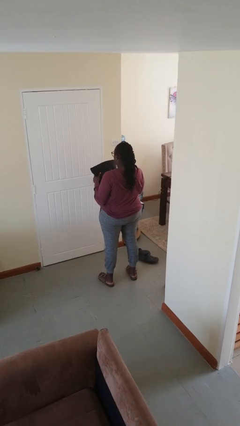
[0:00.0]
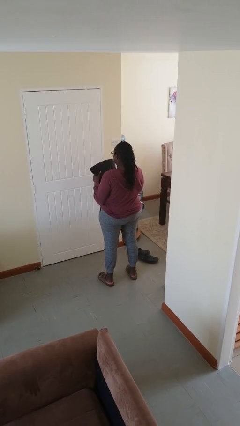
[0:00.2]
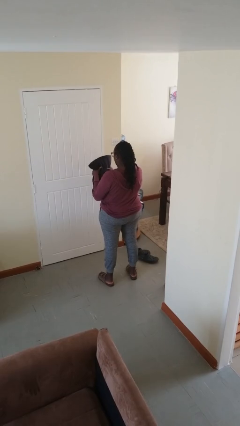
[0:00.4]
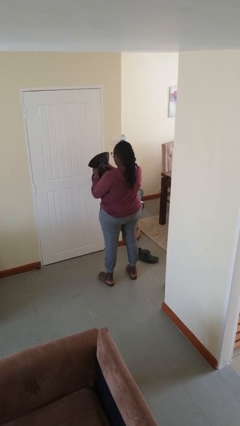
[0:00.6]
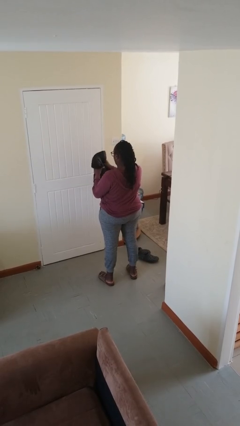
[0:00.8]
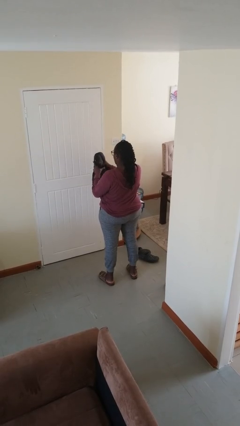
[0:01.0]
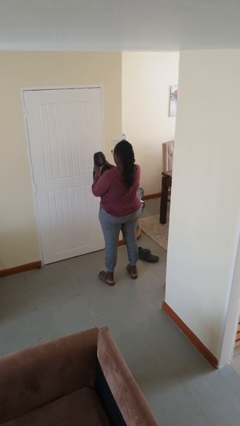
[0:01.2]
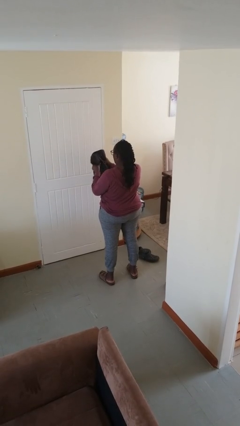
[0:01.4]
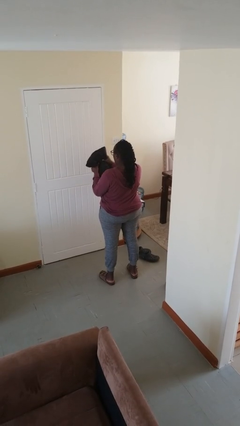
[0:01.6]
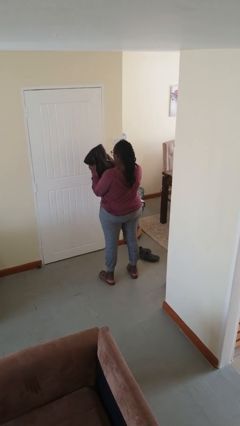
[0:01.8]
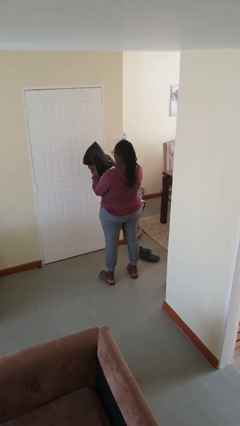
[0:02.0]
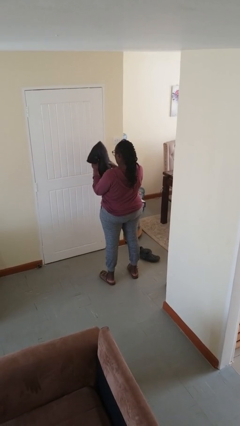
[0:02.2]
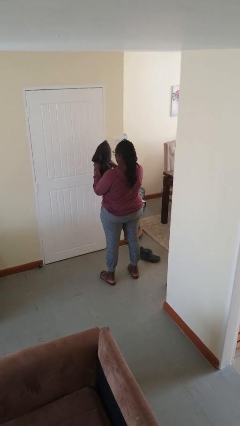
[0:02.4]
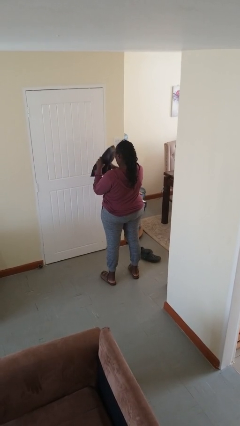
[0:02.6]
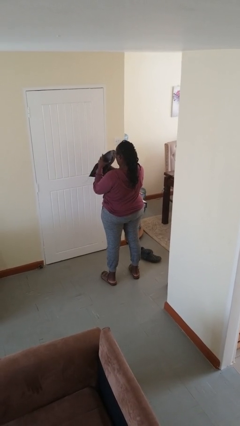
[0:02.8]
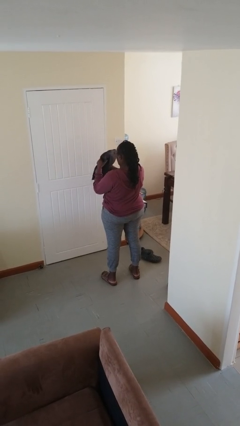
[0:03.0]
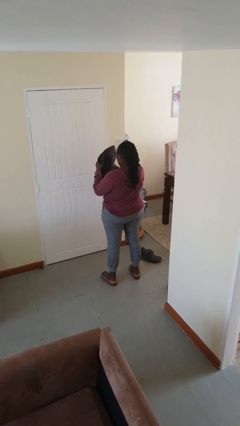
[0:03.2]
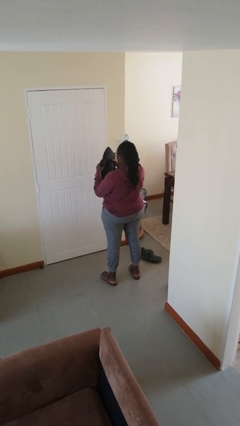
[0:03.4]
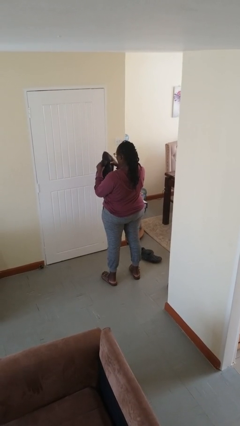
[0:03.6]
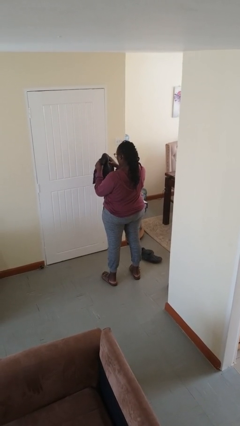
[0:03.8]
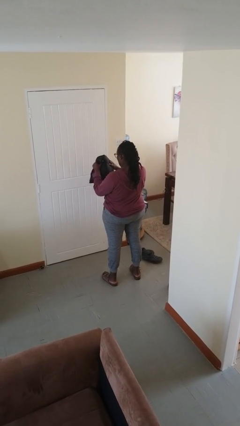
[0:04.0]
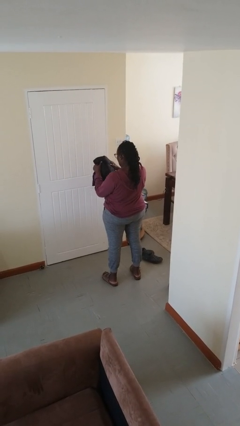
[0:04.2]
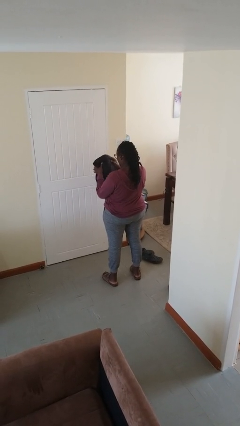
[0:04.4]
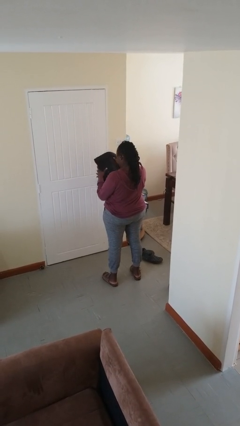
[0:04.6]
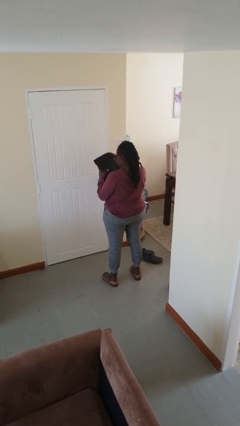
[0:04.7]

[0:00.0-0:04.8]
person squeezes object

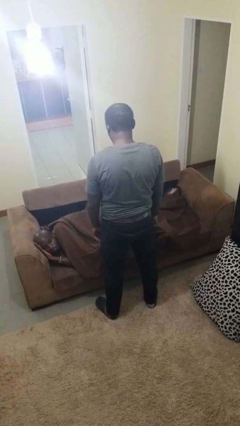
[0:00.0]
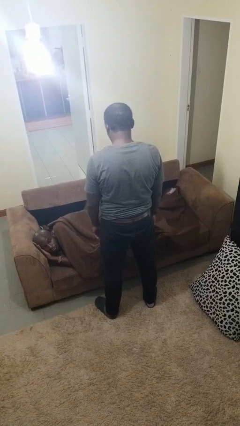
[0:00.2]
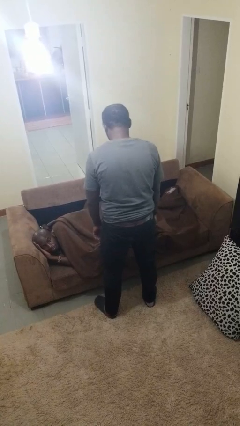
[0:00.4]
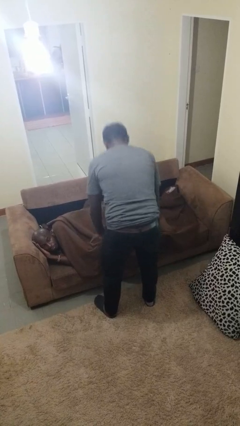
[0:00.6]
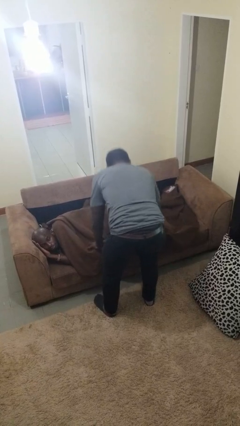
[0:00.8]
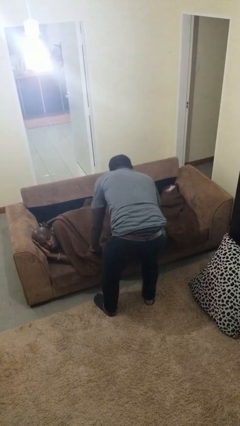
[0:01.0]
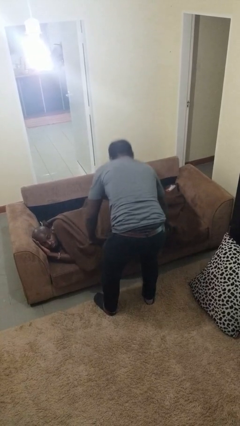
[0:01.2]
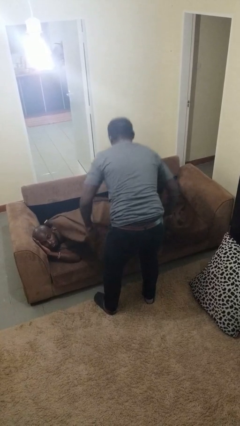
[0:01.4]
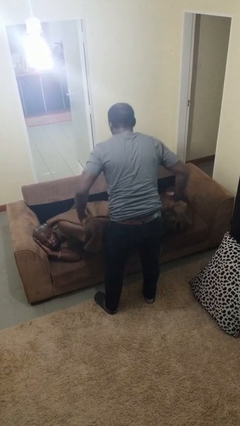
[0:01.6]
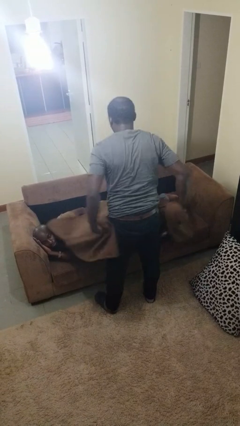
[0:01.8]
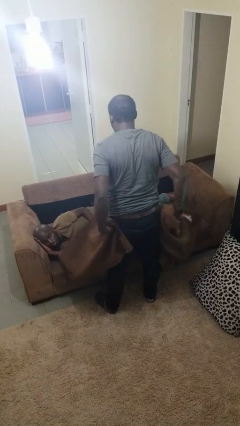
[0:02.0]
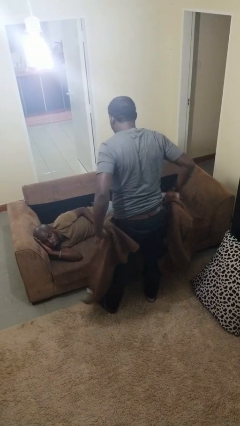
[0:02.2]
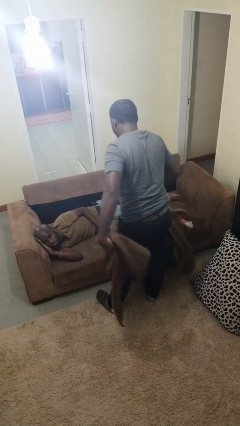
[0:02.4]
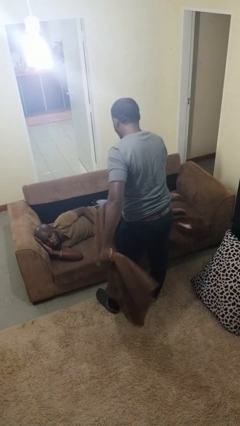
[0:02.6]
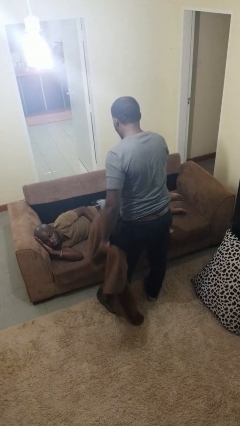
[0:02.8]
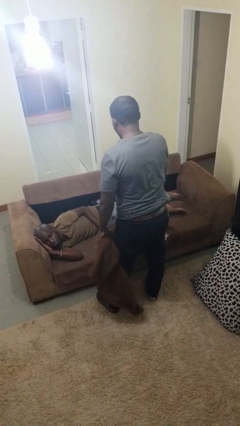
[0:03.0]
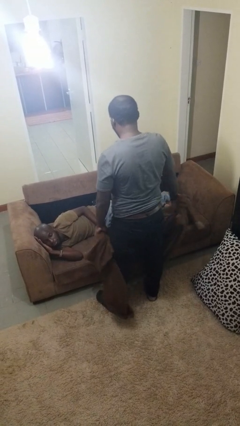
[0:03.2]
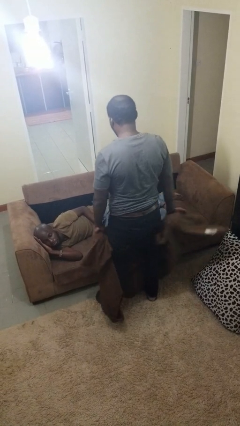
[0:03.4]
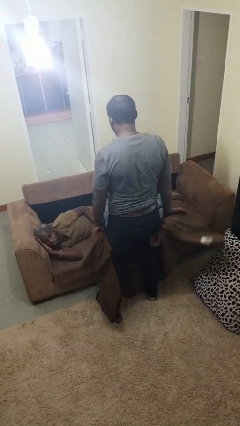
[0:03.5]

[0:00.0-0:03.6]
person uncovers friend with blanket

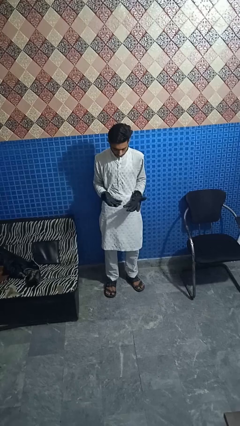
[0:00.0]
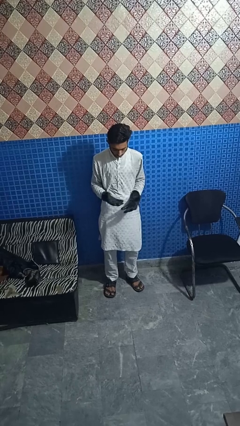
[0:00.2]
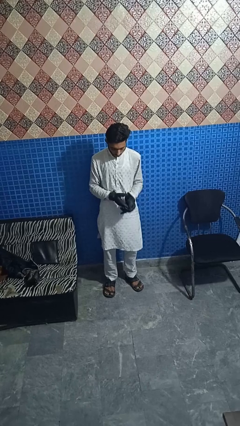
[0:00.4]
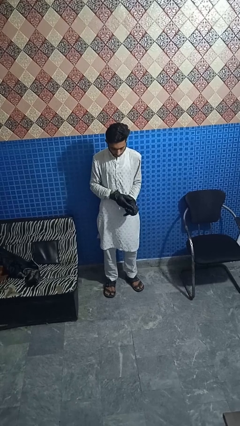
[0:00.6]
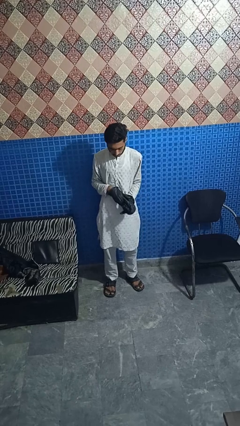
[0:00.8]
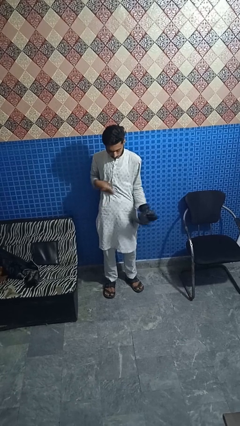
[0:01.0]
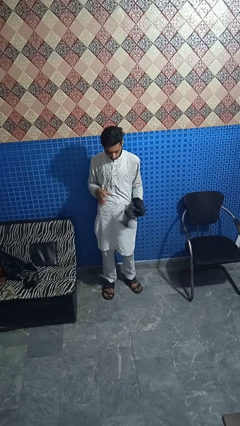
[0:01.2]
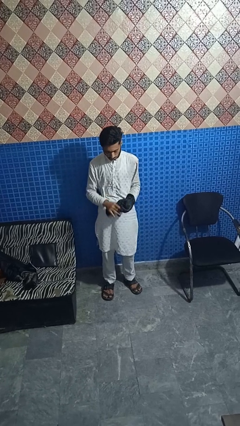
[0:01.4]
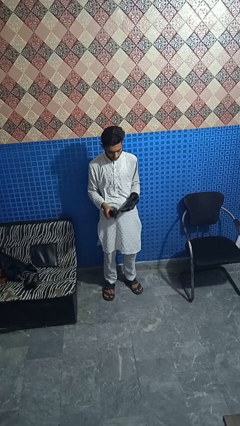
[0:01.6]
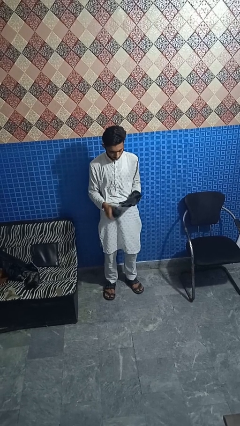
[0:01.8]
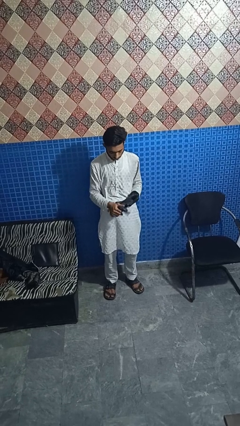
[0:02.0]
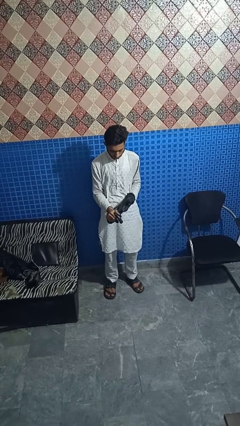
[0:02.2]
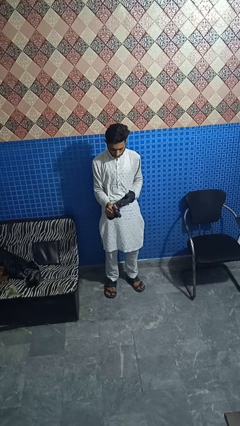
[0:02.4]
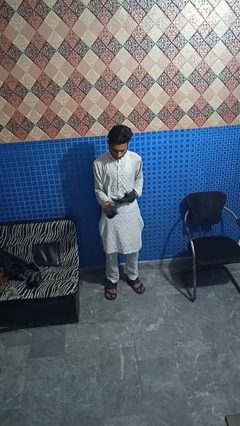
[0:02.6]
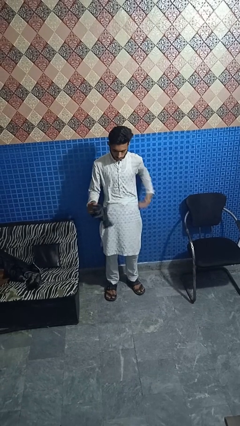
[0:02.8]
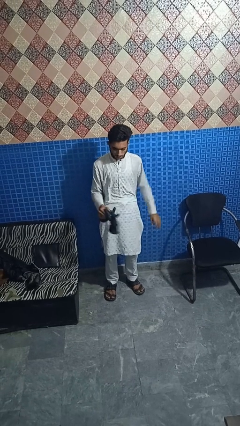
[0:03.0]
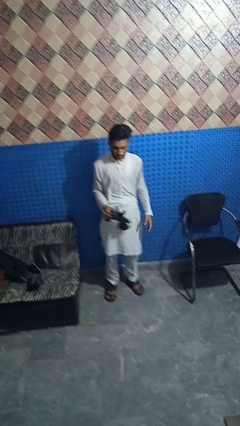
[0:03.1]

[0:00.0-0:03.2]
person takes off gloves

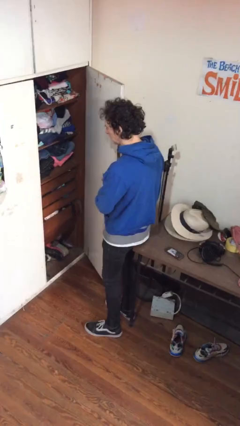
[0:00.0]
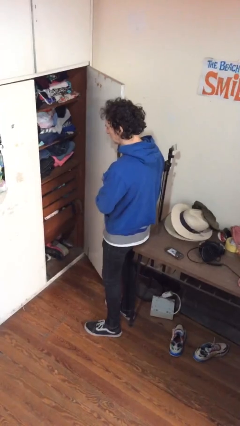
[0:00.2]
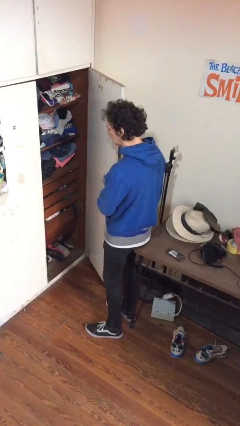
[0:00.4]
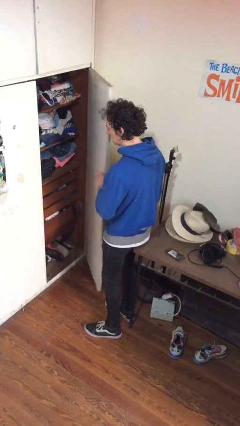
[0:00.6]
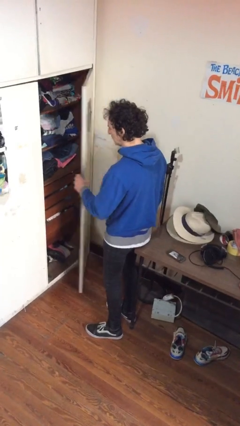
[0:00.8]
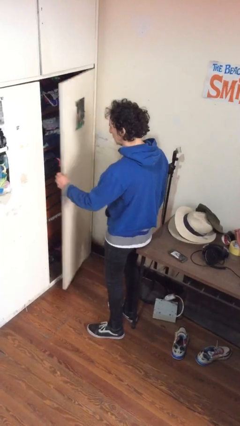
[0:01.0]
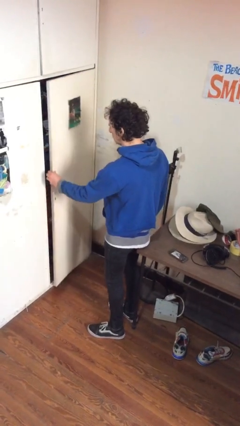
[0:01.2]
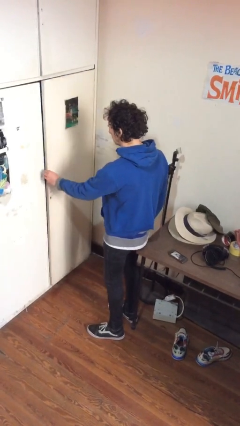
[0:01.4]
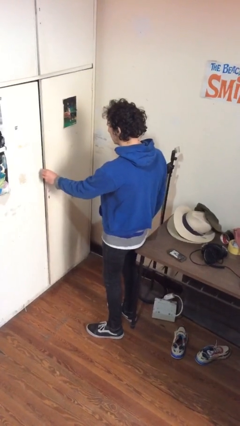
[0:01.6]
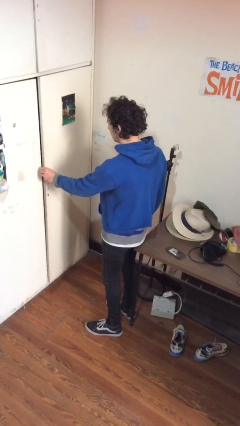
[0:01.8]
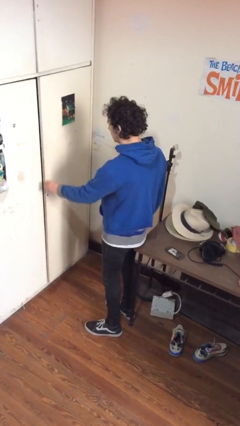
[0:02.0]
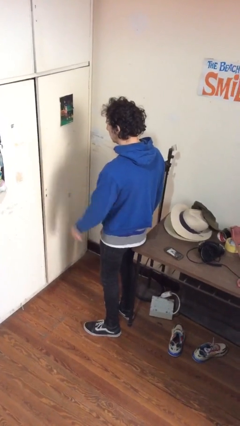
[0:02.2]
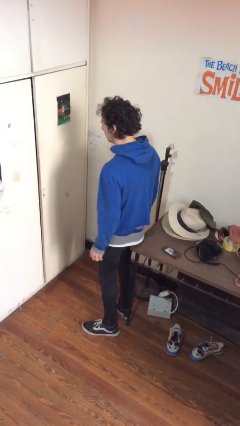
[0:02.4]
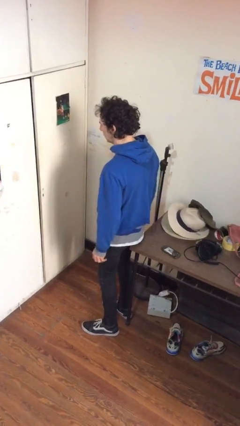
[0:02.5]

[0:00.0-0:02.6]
person closes closet door

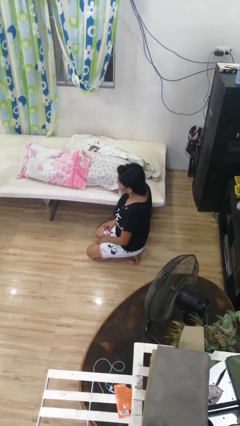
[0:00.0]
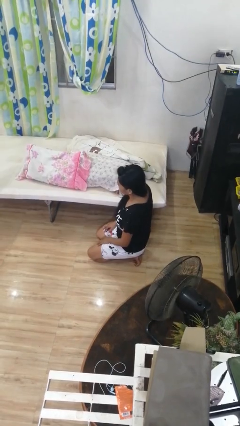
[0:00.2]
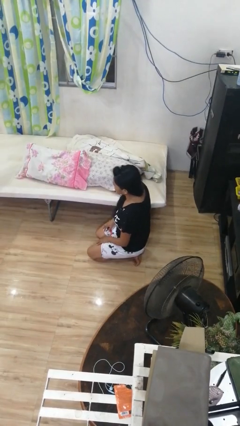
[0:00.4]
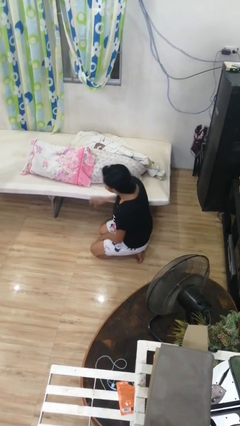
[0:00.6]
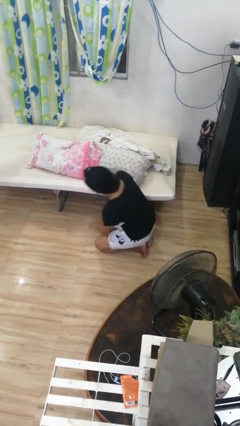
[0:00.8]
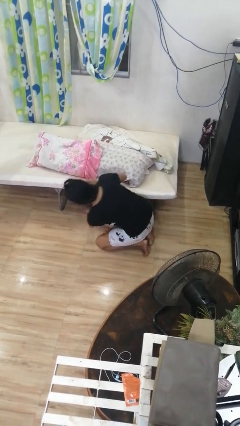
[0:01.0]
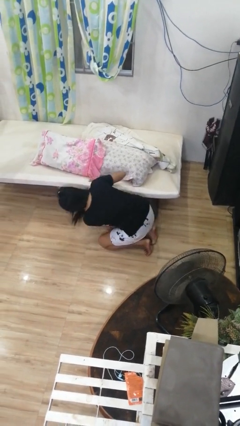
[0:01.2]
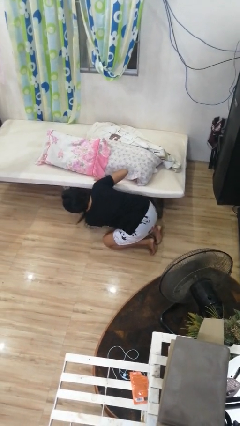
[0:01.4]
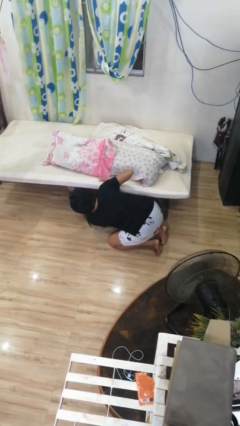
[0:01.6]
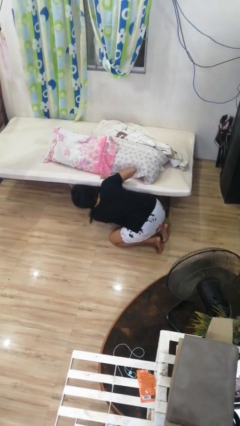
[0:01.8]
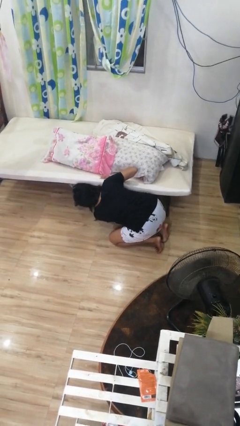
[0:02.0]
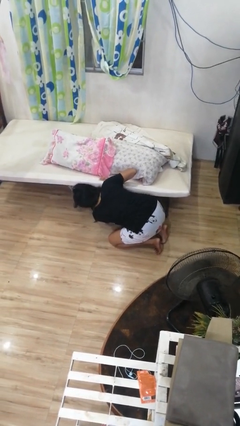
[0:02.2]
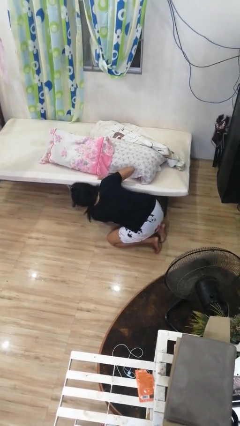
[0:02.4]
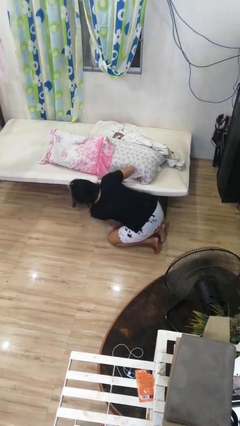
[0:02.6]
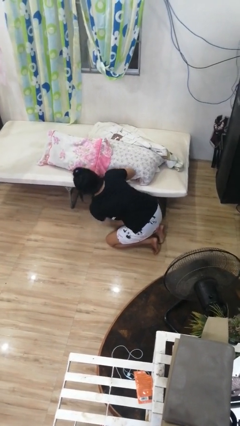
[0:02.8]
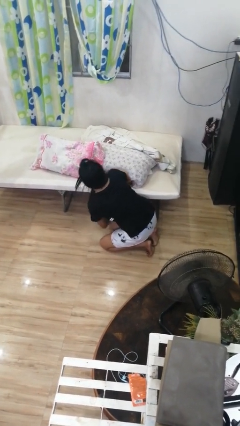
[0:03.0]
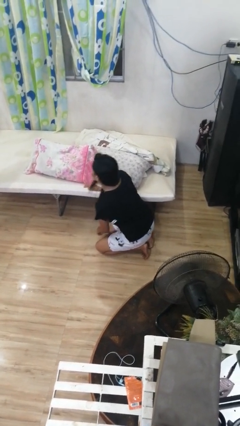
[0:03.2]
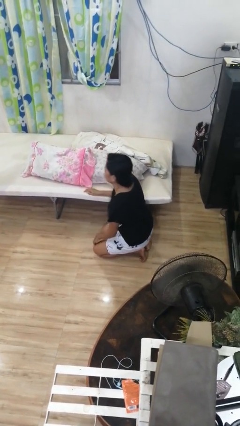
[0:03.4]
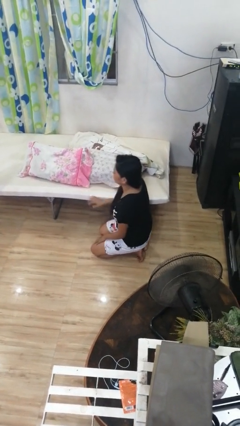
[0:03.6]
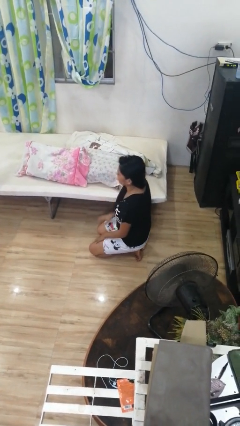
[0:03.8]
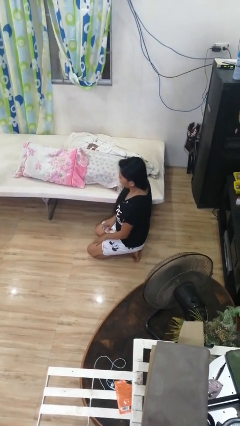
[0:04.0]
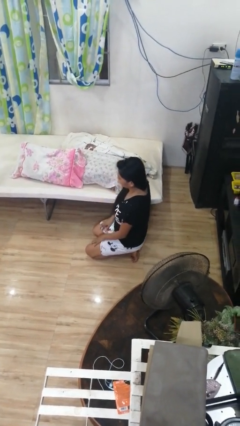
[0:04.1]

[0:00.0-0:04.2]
person searches under bed
